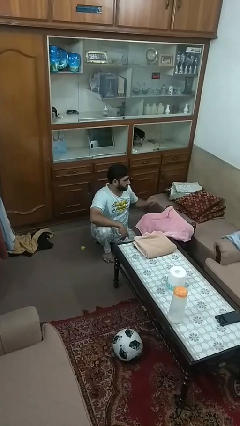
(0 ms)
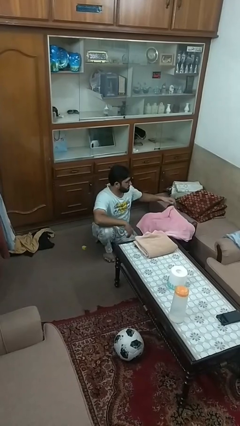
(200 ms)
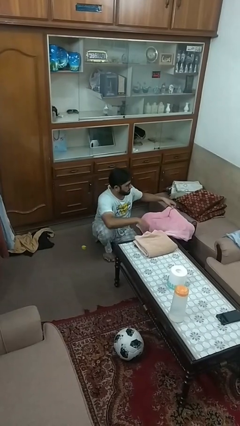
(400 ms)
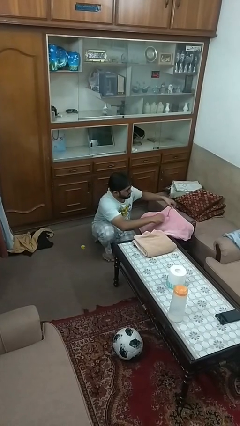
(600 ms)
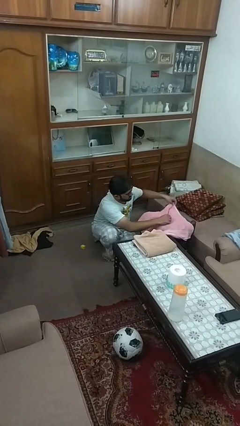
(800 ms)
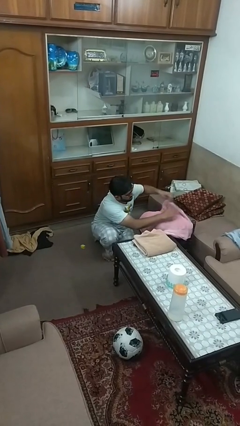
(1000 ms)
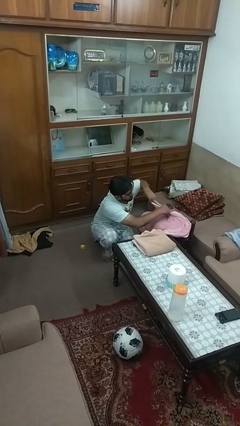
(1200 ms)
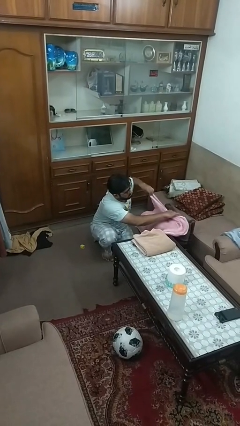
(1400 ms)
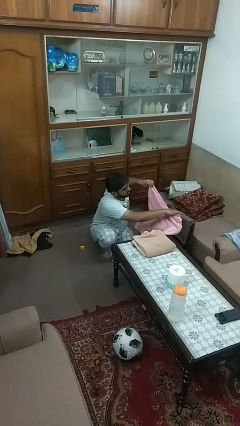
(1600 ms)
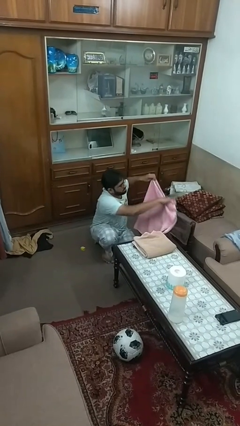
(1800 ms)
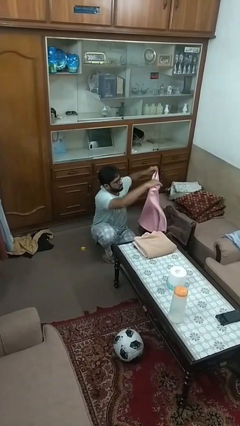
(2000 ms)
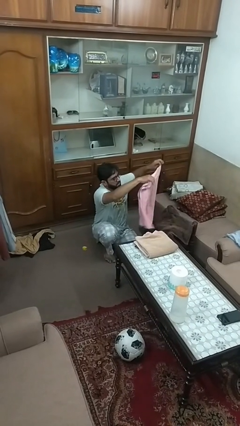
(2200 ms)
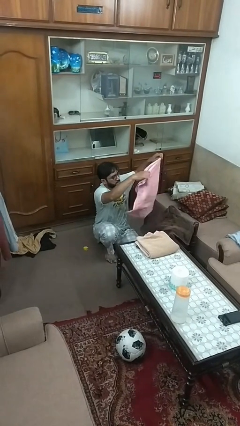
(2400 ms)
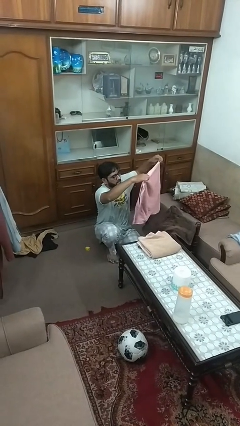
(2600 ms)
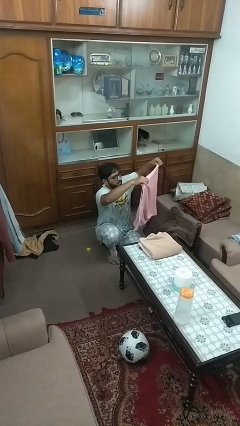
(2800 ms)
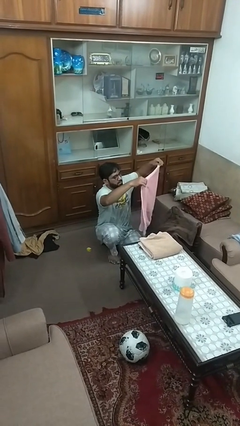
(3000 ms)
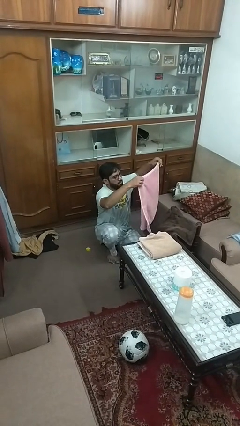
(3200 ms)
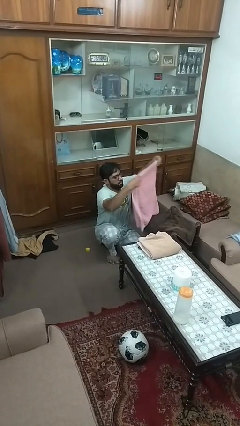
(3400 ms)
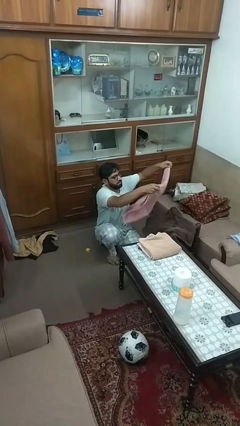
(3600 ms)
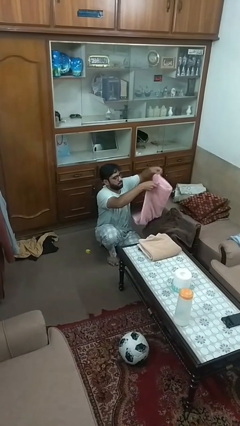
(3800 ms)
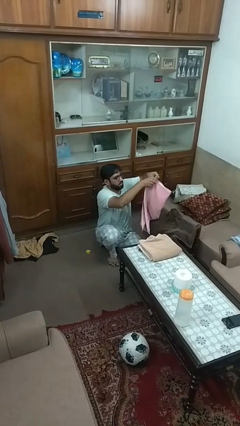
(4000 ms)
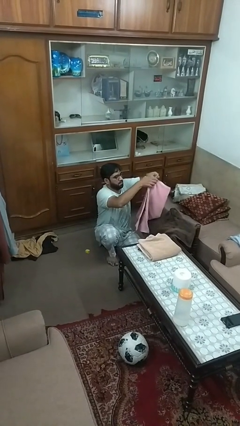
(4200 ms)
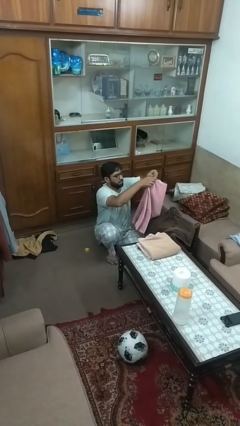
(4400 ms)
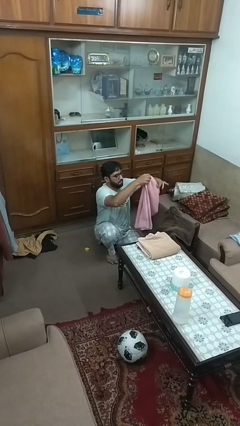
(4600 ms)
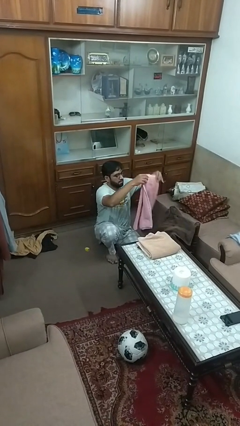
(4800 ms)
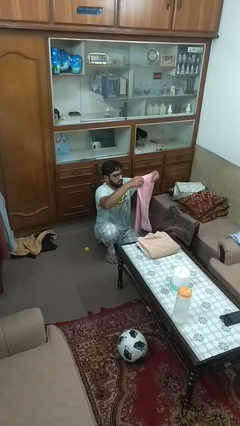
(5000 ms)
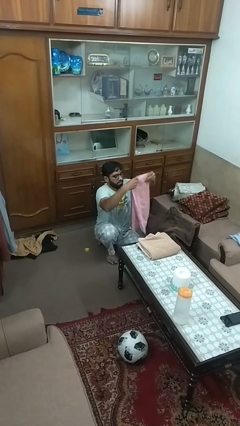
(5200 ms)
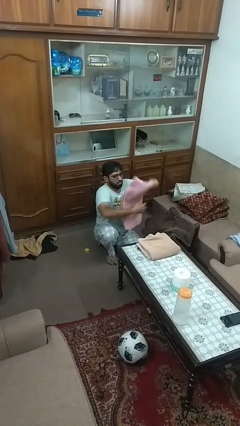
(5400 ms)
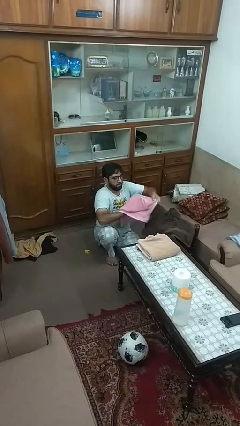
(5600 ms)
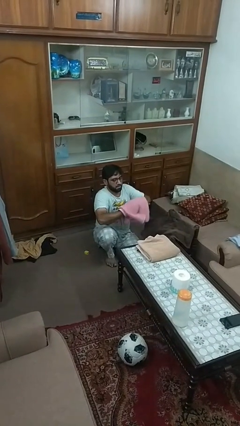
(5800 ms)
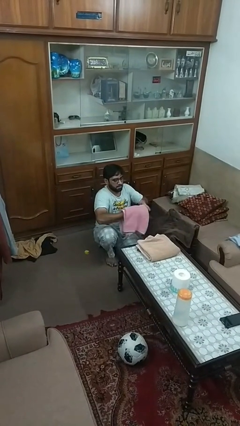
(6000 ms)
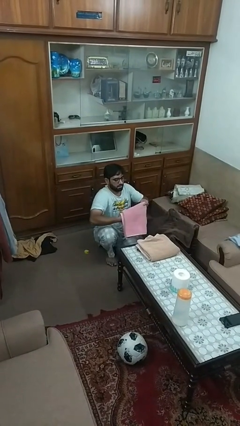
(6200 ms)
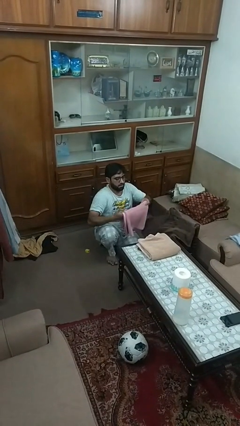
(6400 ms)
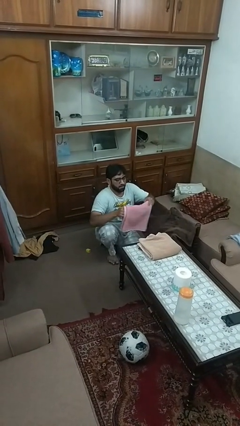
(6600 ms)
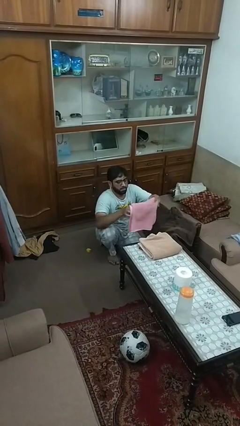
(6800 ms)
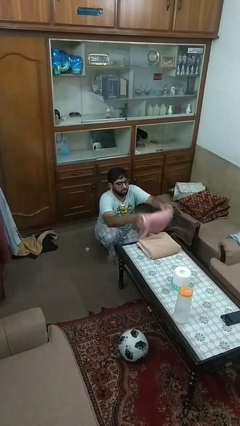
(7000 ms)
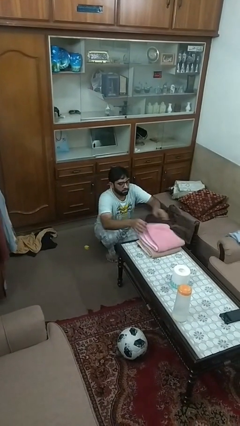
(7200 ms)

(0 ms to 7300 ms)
person folds towel

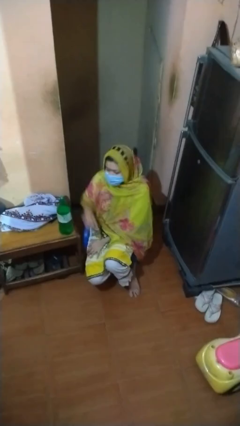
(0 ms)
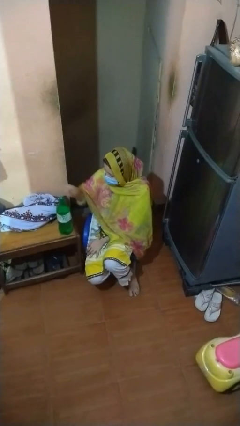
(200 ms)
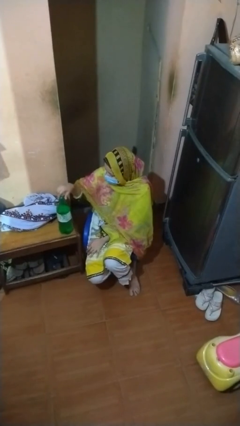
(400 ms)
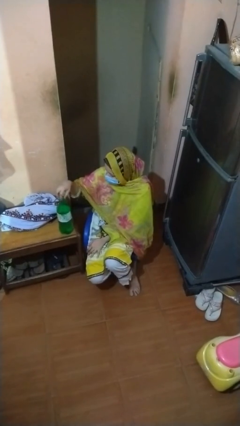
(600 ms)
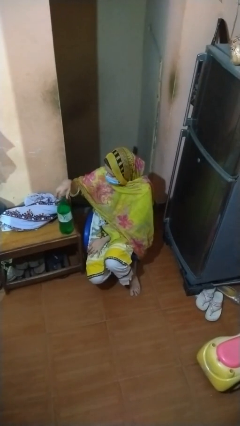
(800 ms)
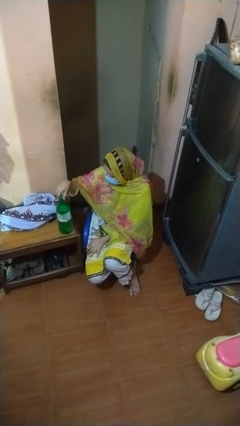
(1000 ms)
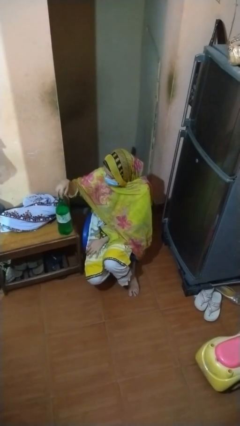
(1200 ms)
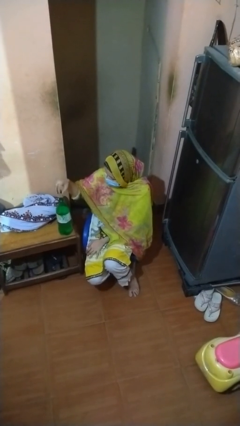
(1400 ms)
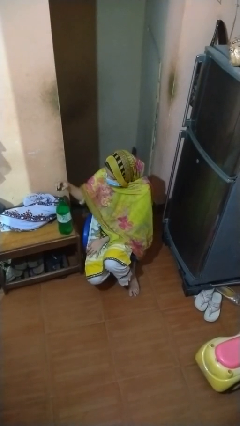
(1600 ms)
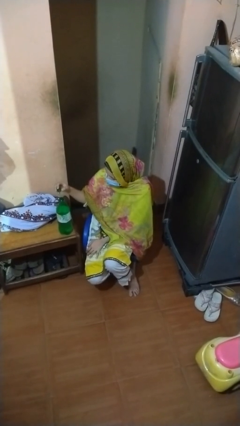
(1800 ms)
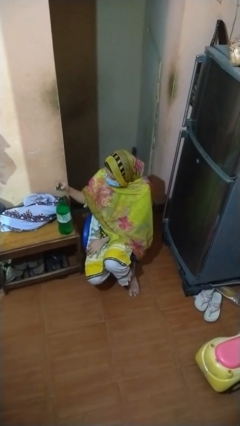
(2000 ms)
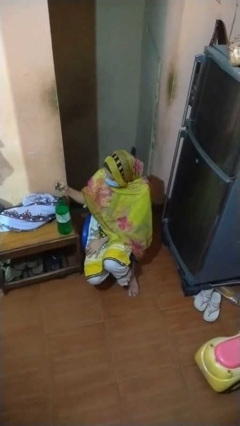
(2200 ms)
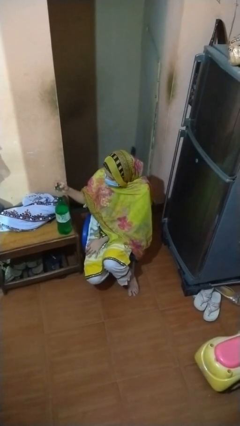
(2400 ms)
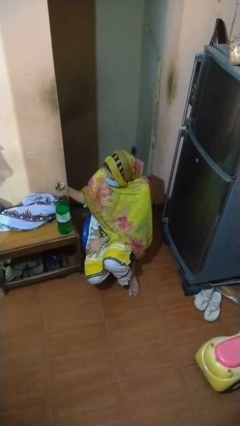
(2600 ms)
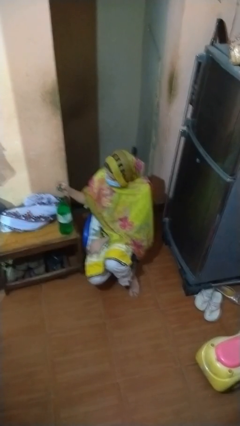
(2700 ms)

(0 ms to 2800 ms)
person unscrews lid from bottle

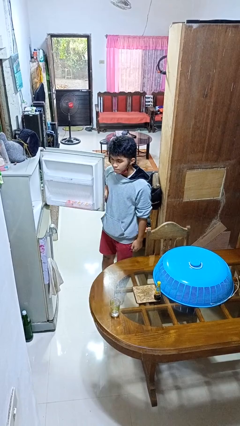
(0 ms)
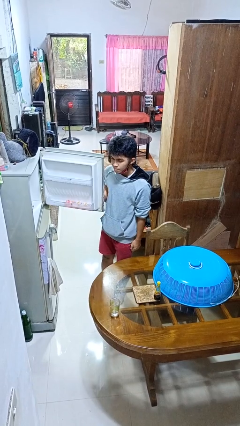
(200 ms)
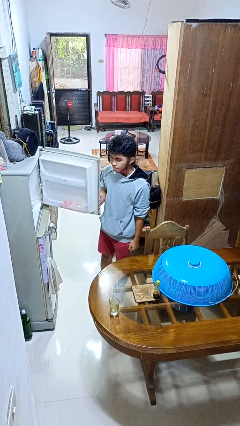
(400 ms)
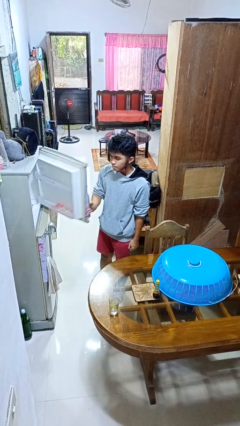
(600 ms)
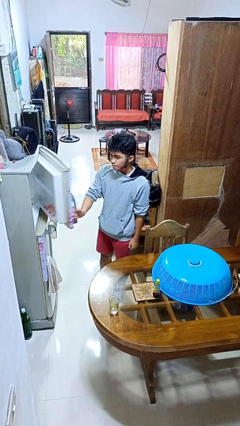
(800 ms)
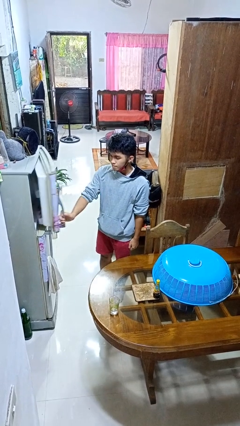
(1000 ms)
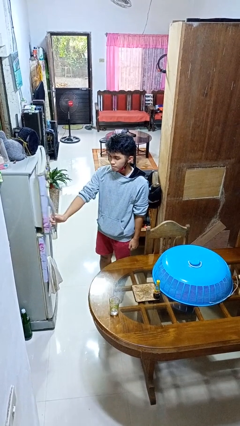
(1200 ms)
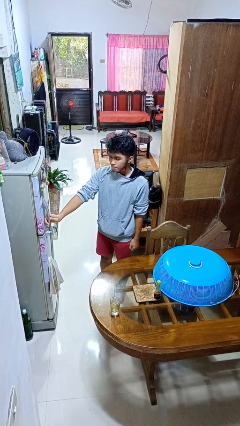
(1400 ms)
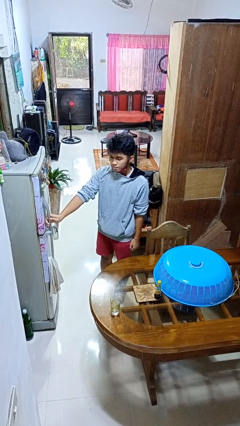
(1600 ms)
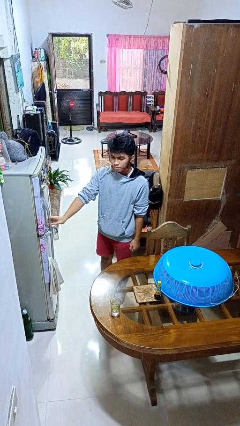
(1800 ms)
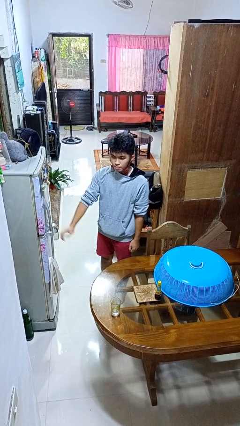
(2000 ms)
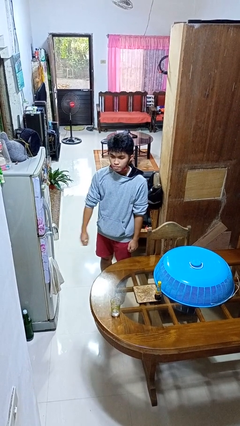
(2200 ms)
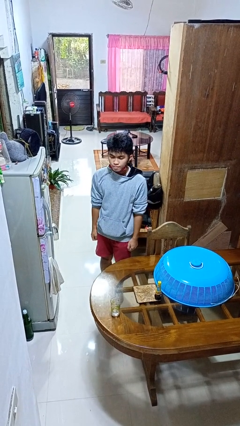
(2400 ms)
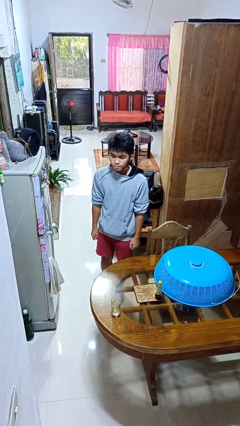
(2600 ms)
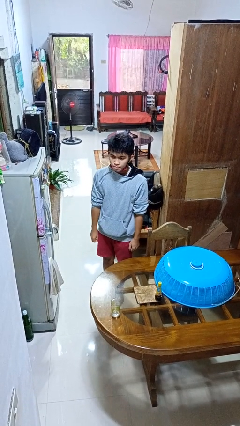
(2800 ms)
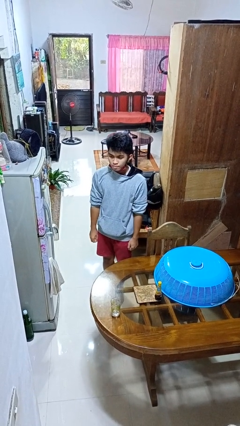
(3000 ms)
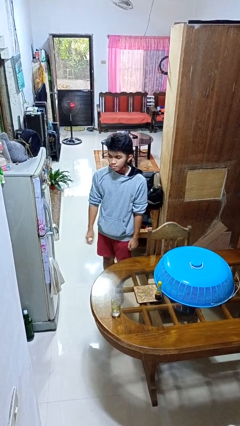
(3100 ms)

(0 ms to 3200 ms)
person closes refrigerator

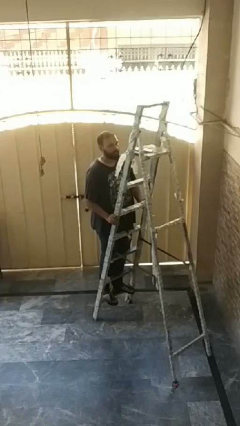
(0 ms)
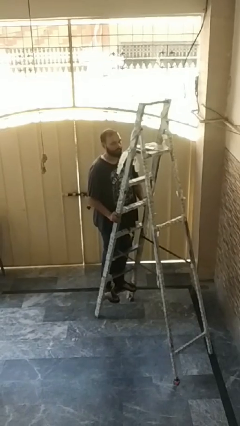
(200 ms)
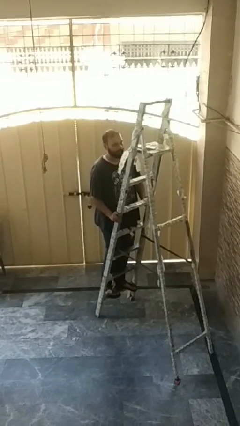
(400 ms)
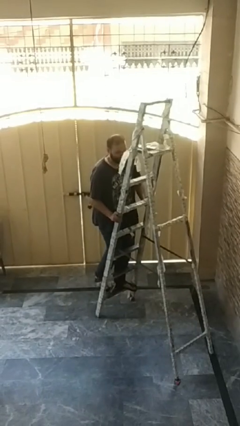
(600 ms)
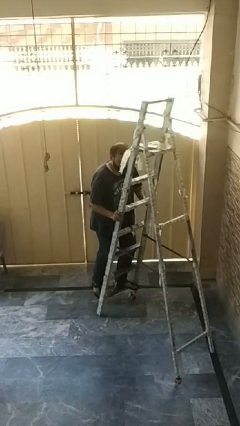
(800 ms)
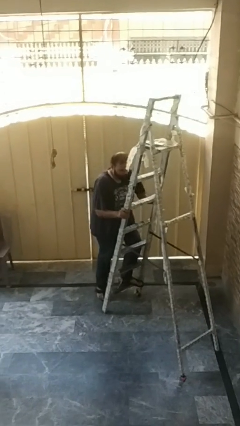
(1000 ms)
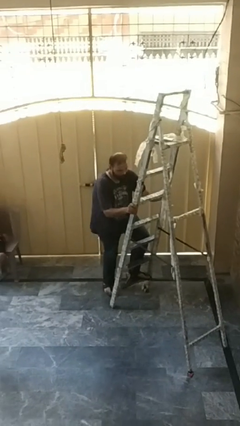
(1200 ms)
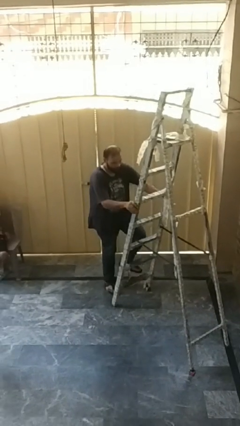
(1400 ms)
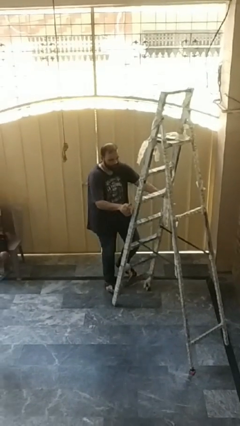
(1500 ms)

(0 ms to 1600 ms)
person climbs down ladder

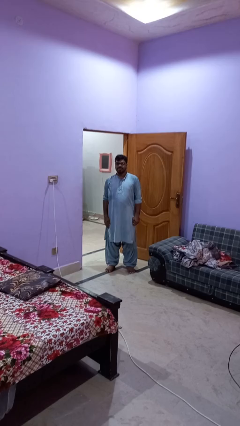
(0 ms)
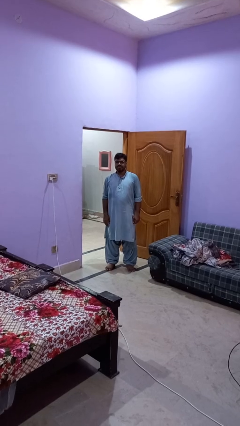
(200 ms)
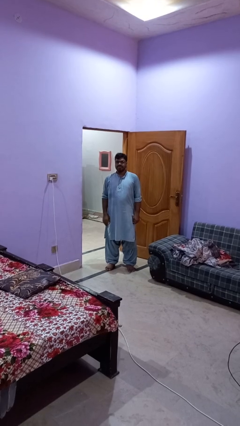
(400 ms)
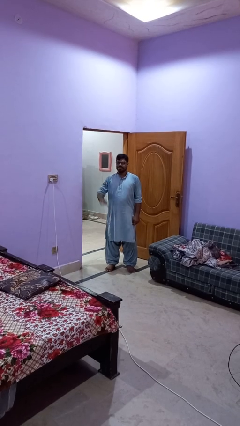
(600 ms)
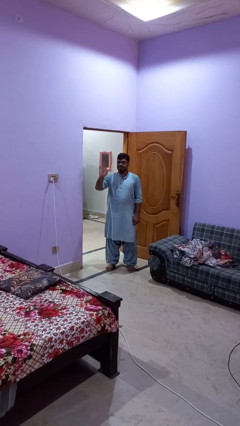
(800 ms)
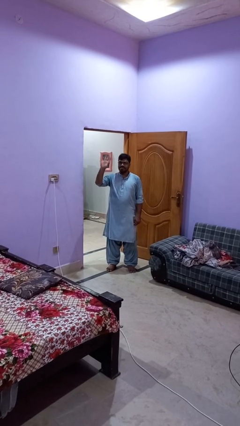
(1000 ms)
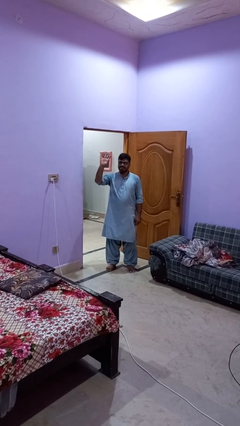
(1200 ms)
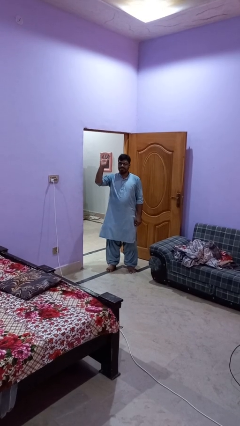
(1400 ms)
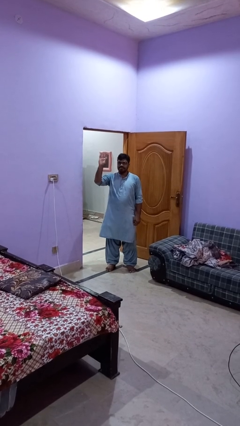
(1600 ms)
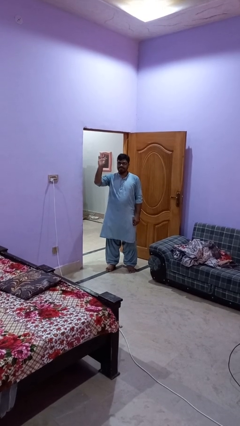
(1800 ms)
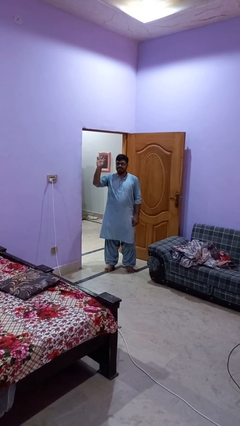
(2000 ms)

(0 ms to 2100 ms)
person waves at person

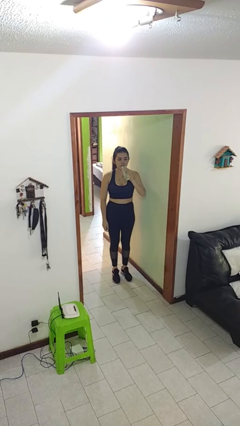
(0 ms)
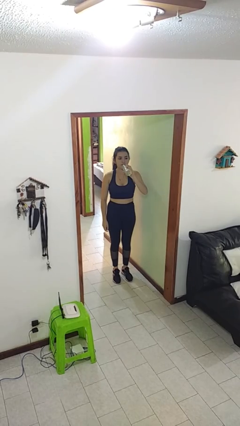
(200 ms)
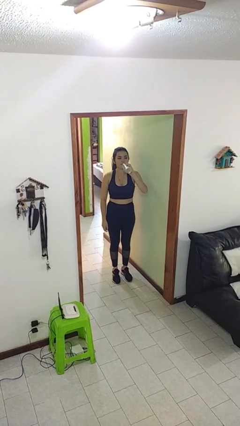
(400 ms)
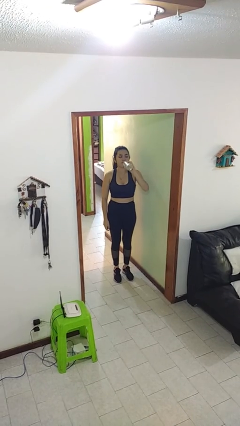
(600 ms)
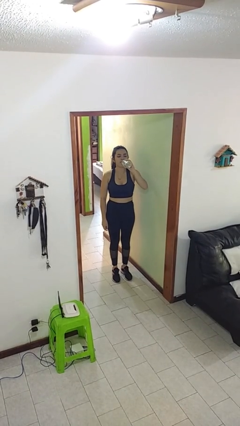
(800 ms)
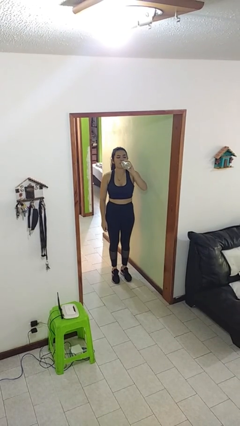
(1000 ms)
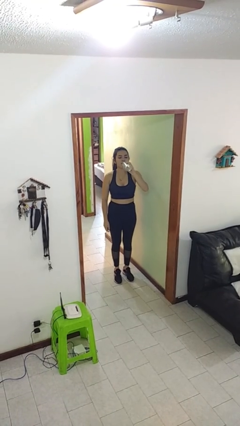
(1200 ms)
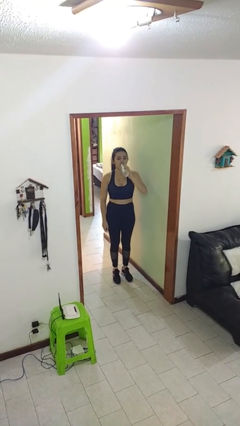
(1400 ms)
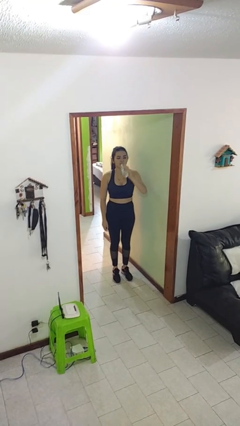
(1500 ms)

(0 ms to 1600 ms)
person drinks from bottle
